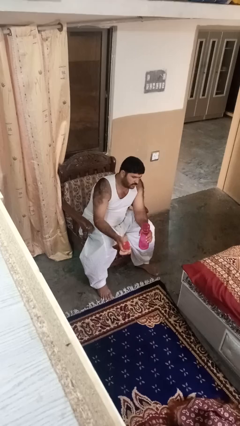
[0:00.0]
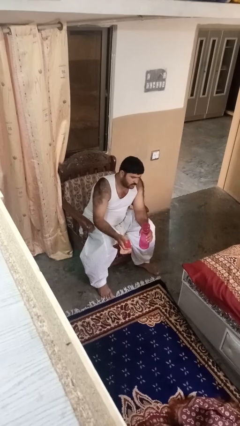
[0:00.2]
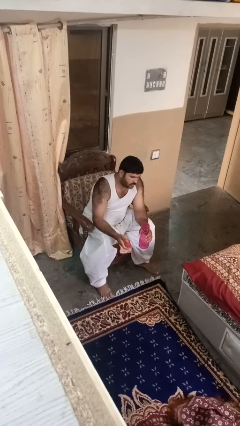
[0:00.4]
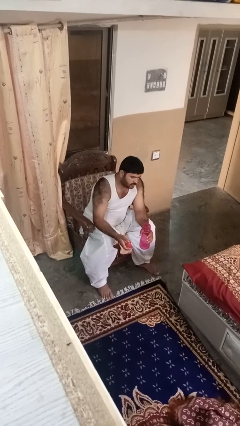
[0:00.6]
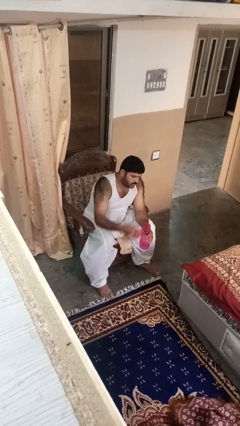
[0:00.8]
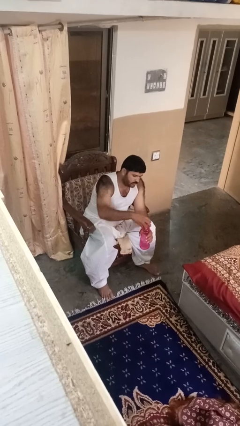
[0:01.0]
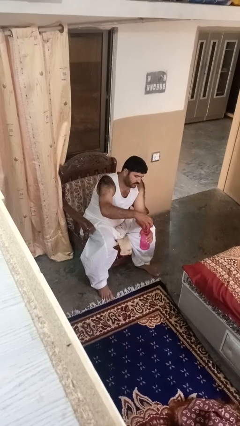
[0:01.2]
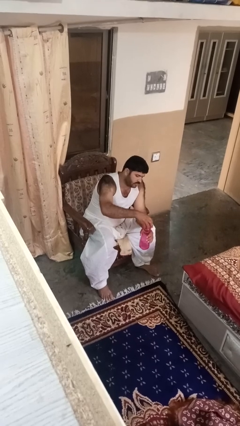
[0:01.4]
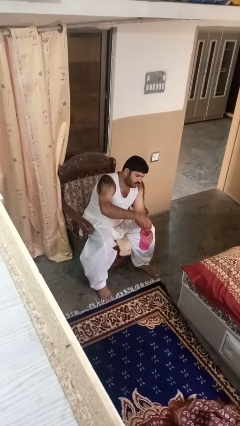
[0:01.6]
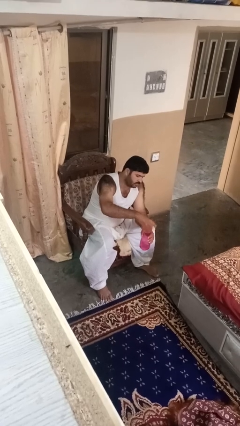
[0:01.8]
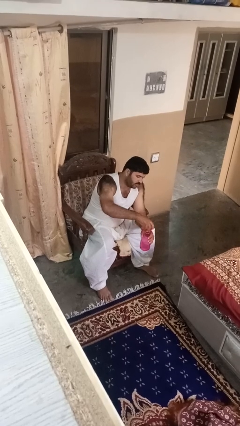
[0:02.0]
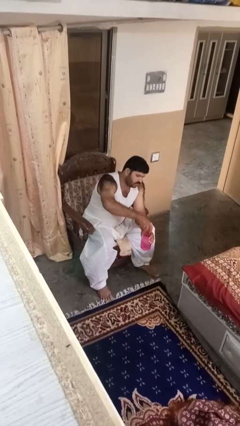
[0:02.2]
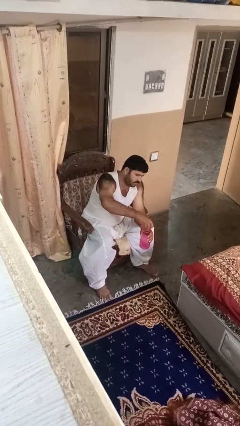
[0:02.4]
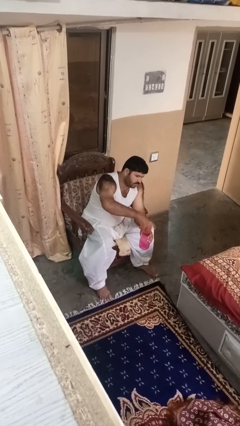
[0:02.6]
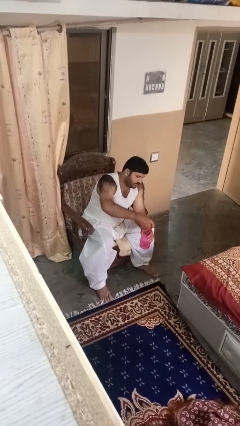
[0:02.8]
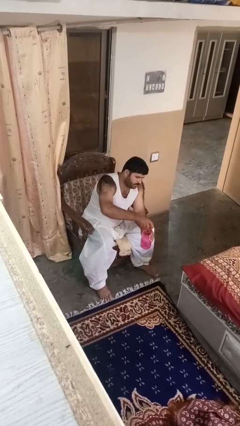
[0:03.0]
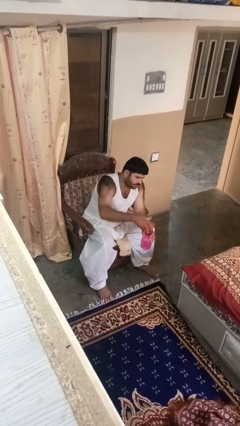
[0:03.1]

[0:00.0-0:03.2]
person screws lid to bottle

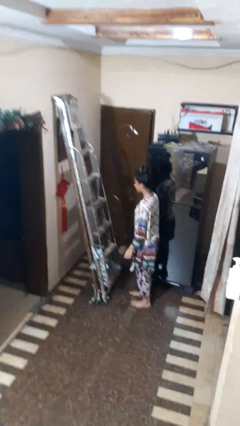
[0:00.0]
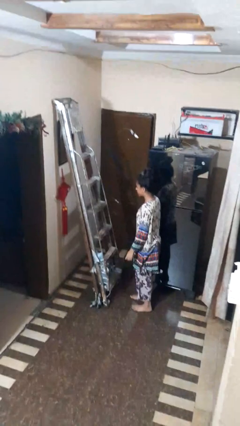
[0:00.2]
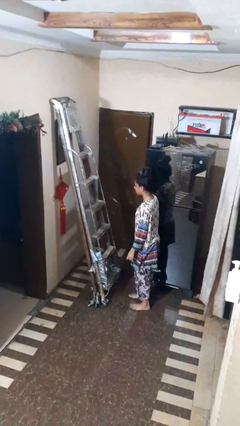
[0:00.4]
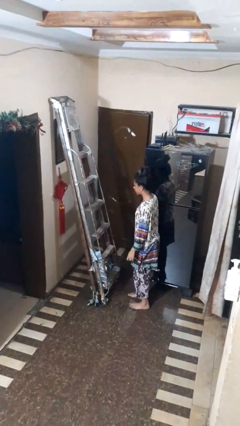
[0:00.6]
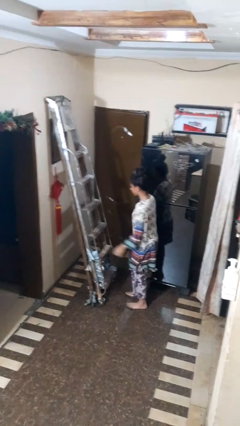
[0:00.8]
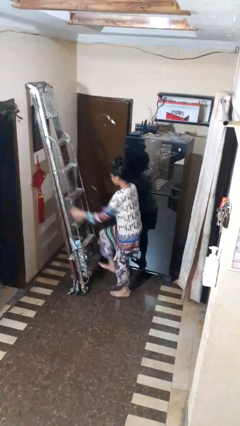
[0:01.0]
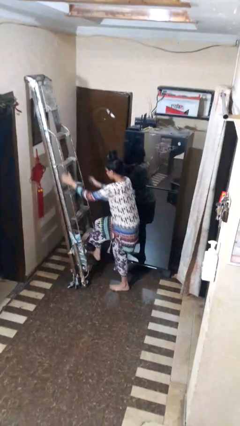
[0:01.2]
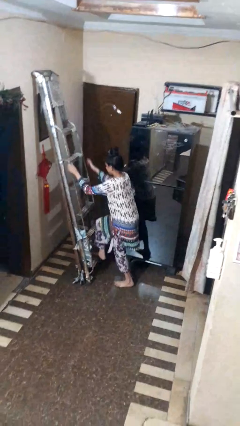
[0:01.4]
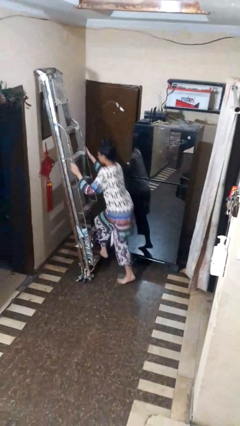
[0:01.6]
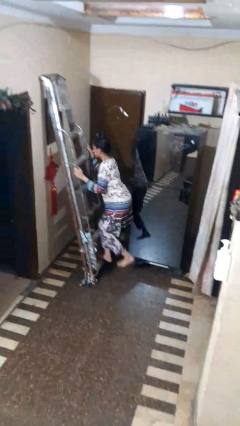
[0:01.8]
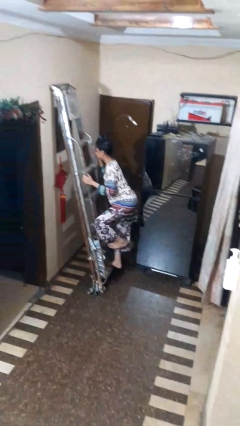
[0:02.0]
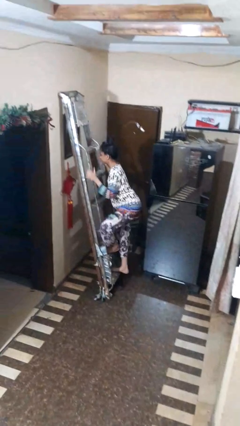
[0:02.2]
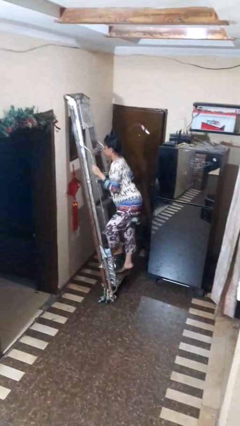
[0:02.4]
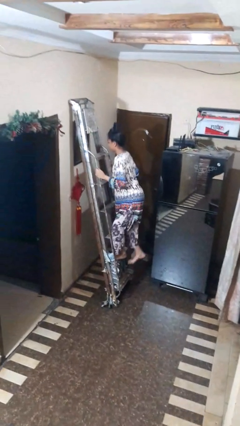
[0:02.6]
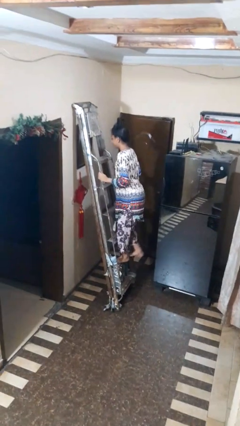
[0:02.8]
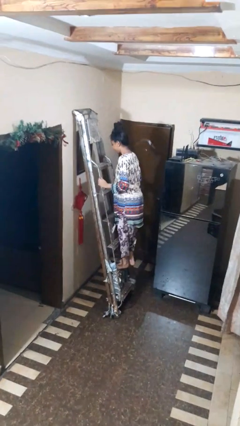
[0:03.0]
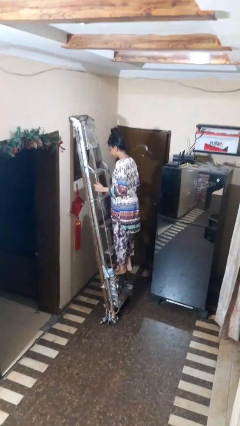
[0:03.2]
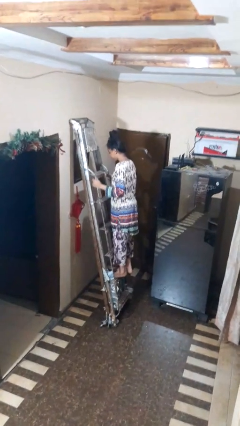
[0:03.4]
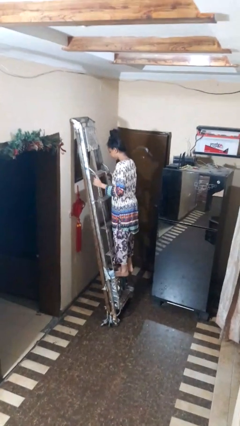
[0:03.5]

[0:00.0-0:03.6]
person climbs up ladder

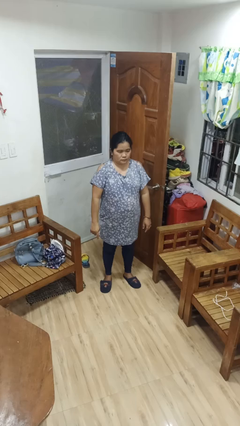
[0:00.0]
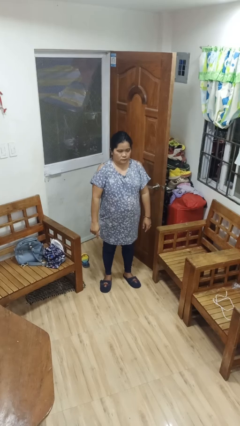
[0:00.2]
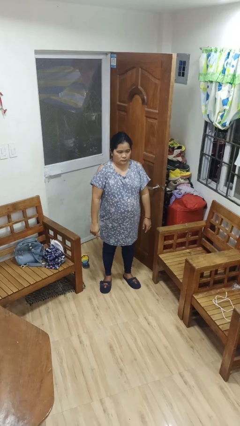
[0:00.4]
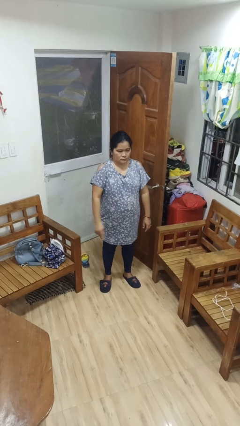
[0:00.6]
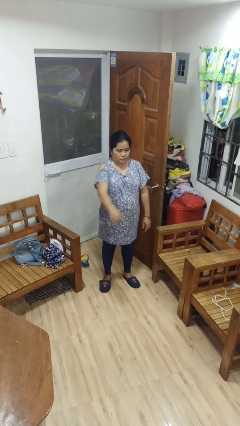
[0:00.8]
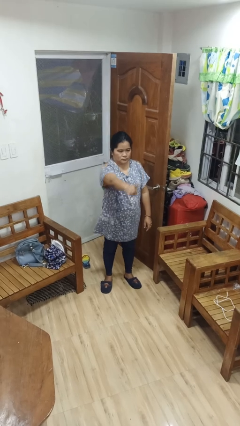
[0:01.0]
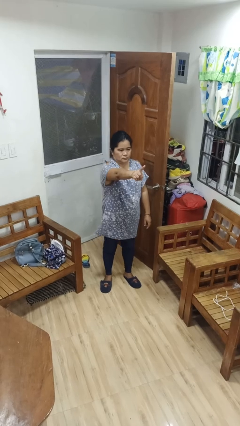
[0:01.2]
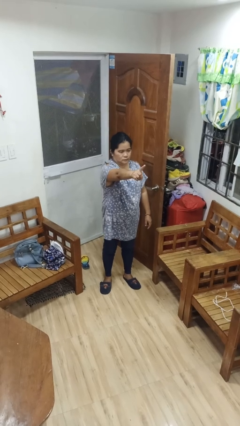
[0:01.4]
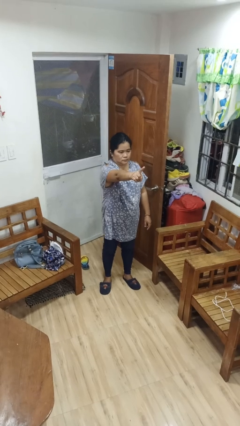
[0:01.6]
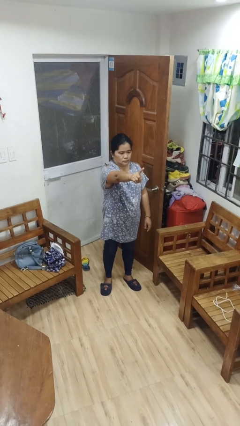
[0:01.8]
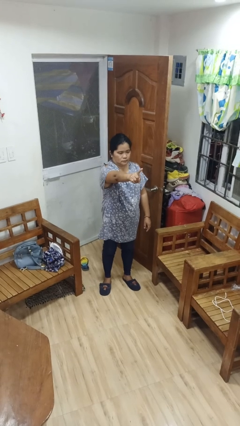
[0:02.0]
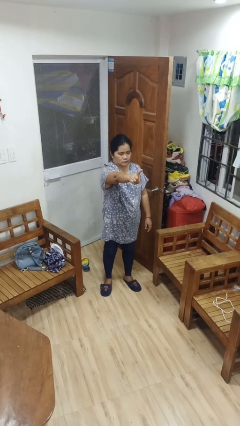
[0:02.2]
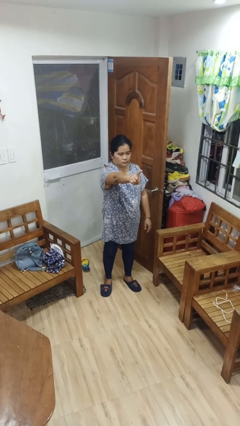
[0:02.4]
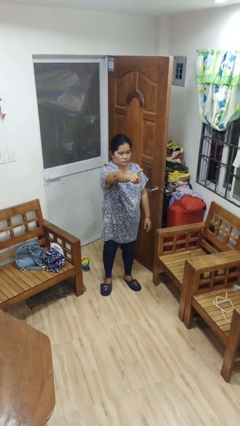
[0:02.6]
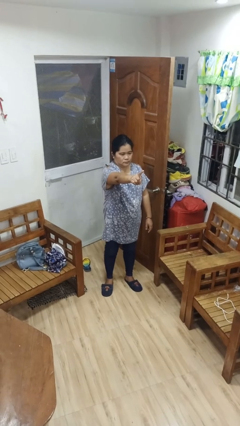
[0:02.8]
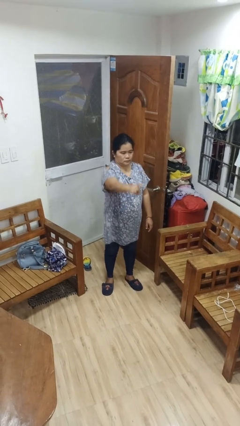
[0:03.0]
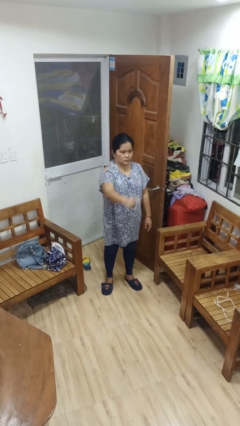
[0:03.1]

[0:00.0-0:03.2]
person gestures number one

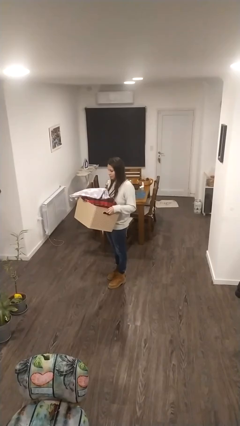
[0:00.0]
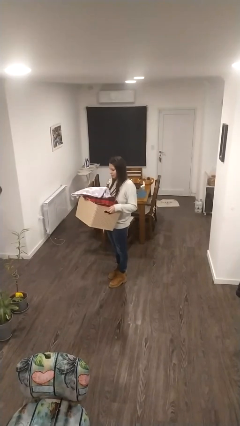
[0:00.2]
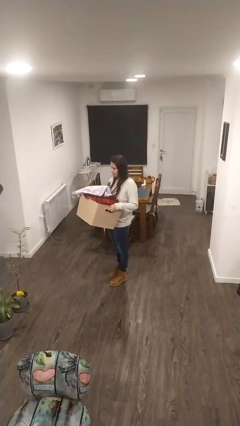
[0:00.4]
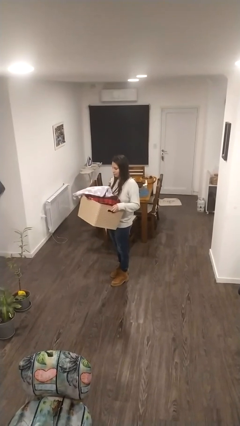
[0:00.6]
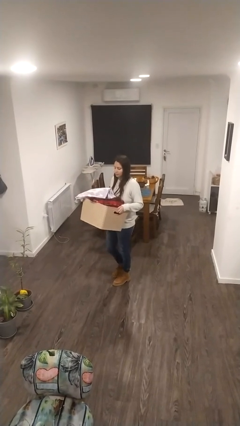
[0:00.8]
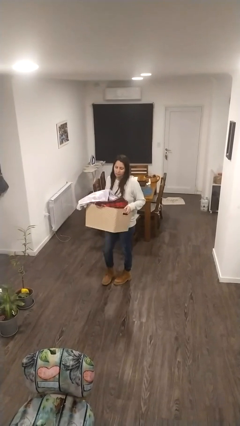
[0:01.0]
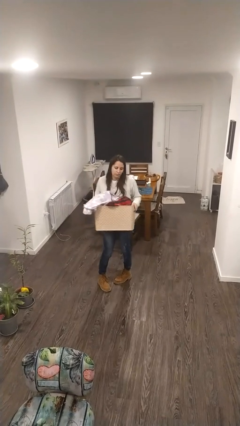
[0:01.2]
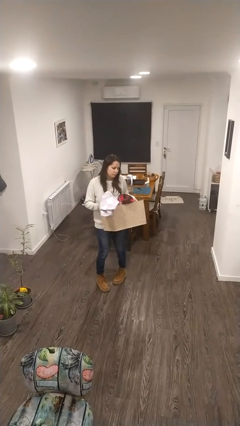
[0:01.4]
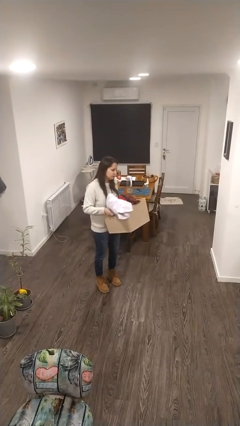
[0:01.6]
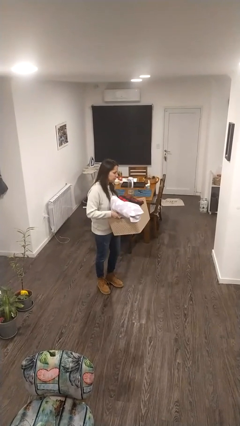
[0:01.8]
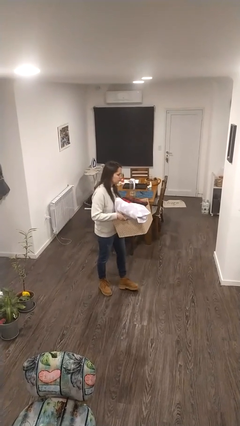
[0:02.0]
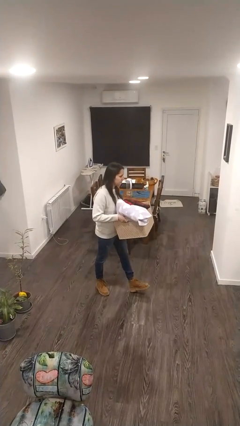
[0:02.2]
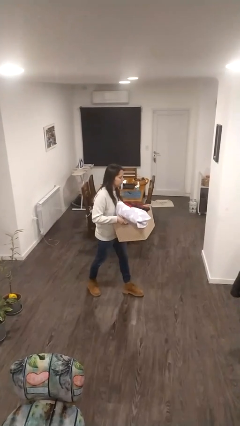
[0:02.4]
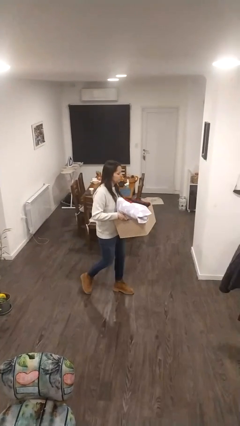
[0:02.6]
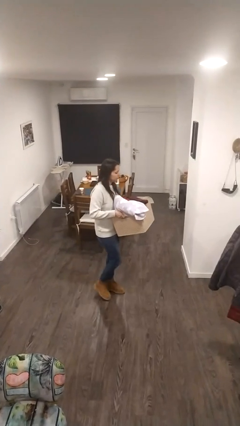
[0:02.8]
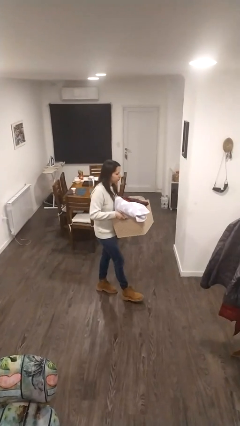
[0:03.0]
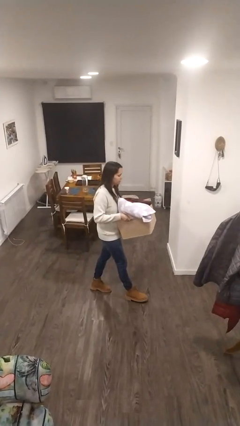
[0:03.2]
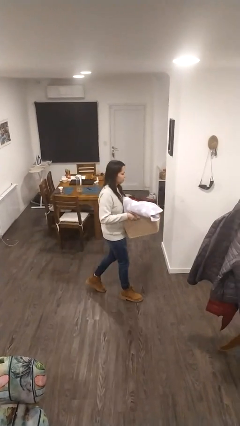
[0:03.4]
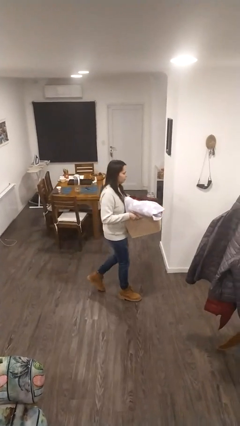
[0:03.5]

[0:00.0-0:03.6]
person carries laundry basket

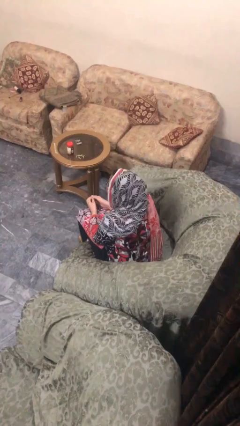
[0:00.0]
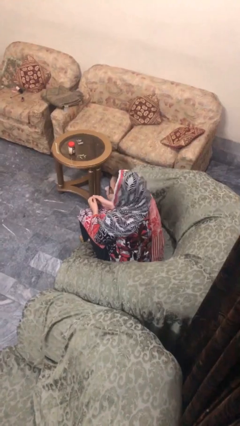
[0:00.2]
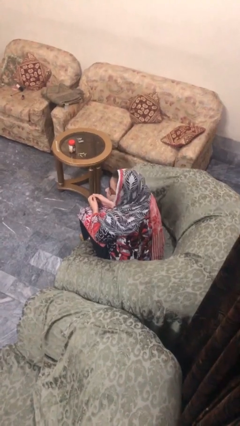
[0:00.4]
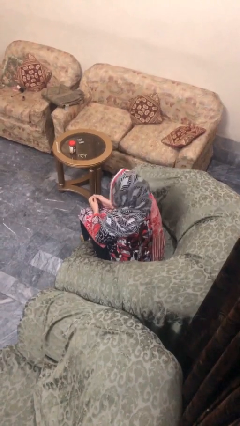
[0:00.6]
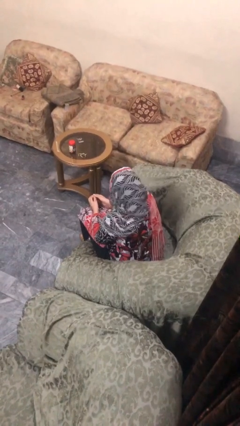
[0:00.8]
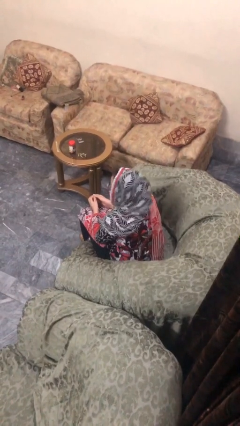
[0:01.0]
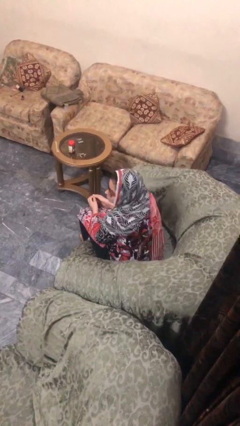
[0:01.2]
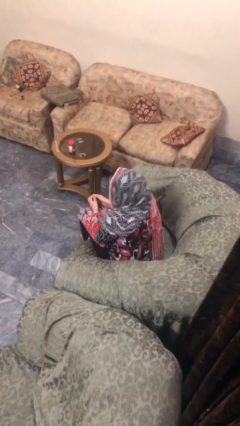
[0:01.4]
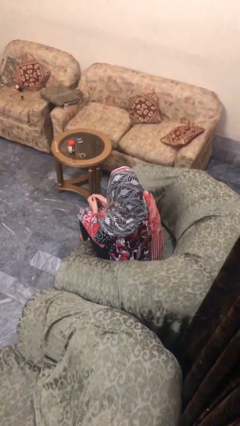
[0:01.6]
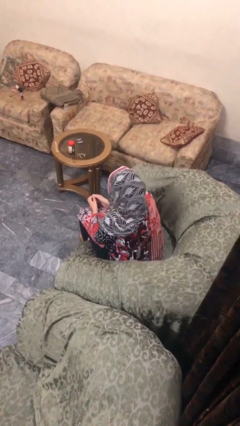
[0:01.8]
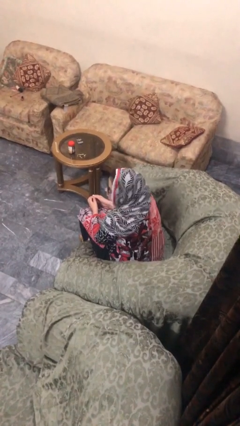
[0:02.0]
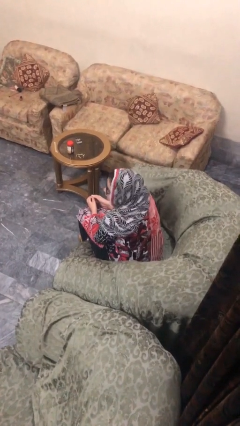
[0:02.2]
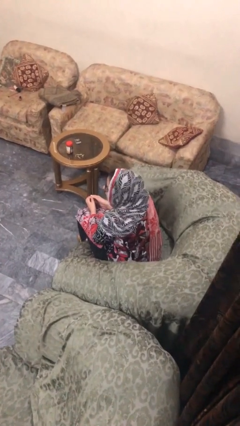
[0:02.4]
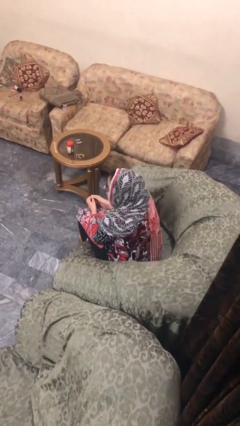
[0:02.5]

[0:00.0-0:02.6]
person shakes head

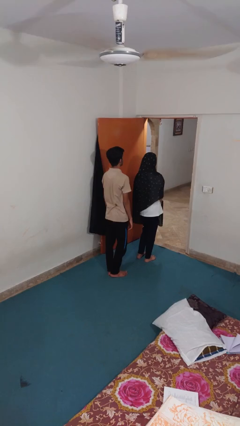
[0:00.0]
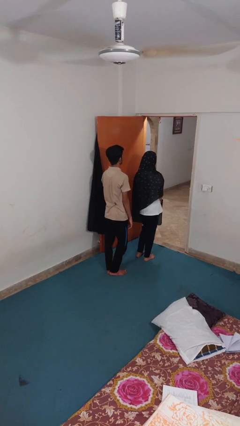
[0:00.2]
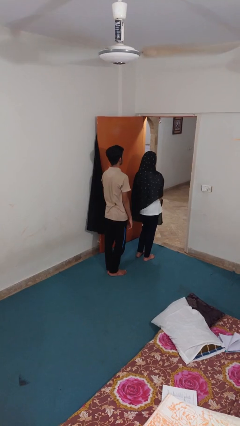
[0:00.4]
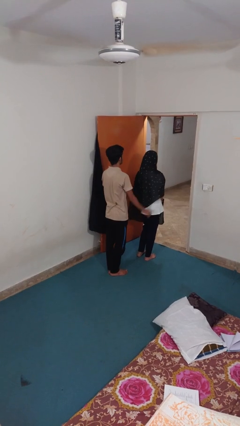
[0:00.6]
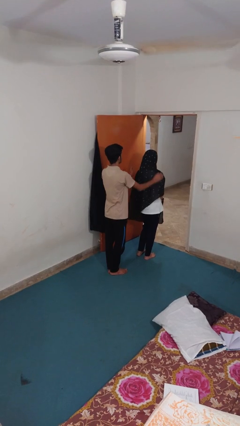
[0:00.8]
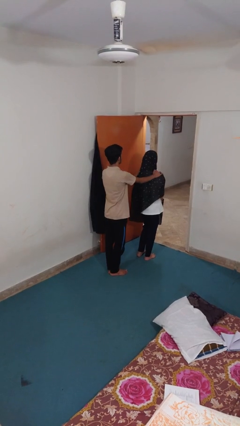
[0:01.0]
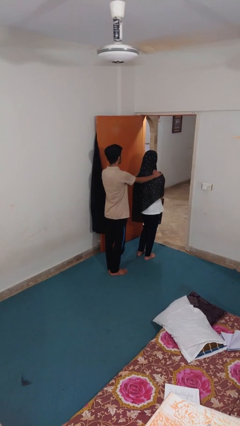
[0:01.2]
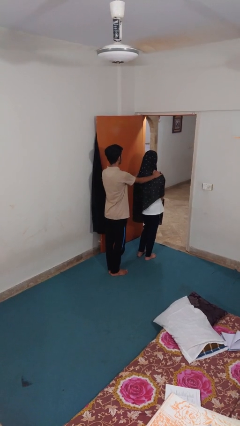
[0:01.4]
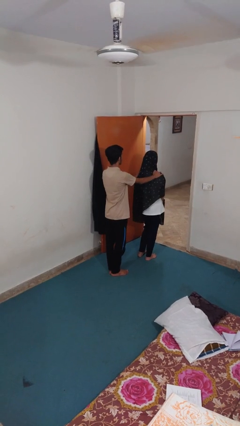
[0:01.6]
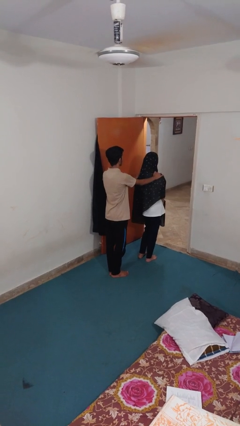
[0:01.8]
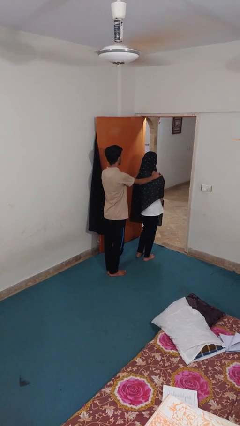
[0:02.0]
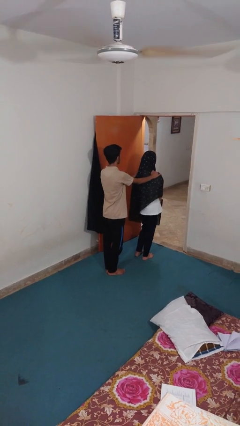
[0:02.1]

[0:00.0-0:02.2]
person grabs person by shoulder
